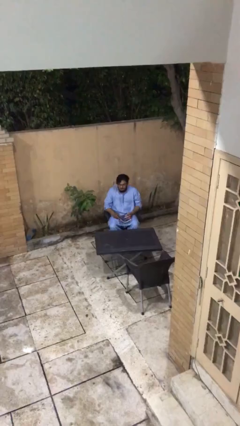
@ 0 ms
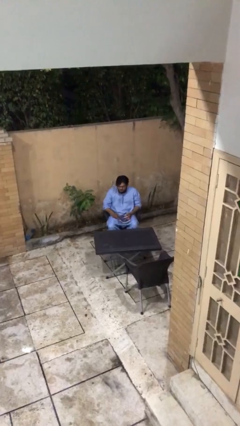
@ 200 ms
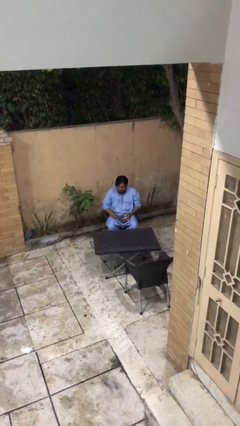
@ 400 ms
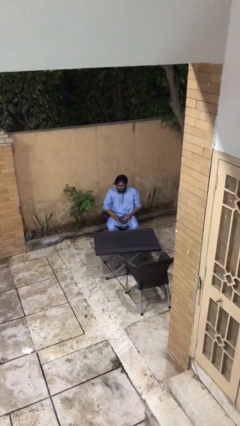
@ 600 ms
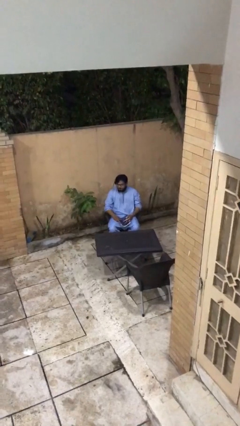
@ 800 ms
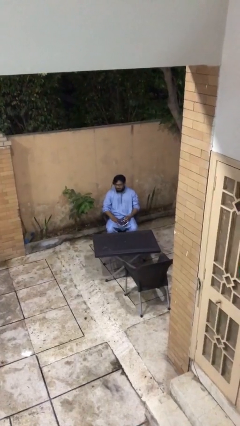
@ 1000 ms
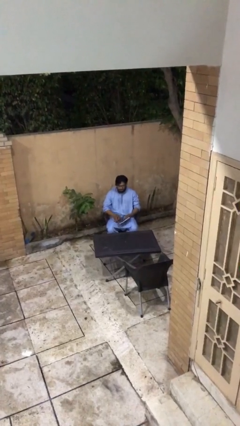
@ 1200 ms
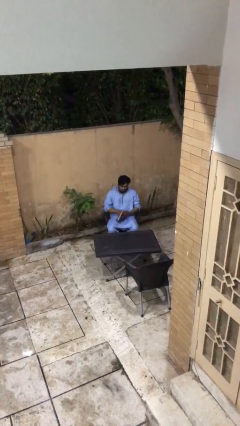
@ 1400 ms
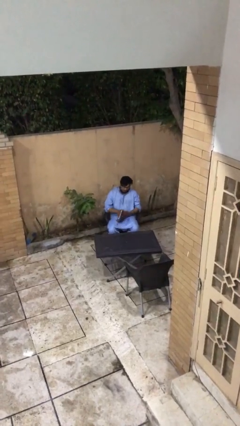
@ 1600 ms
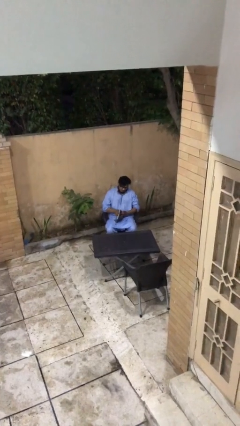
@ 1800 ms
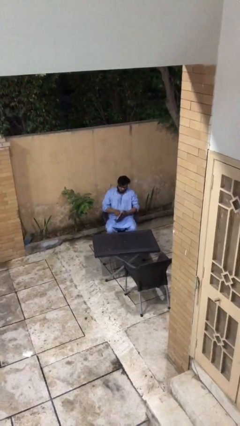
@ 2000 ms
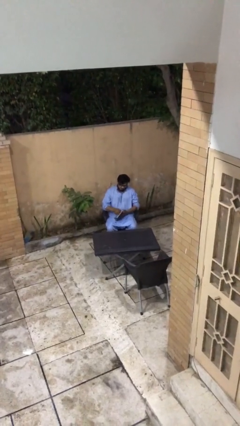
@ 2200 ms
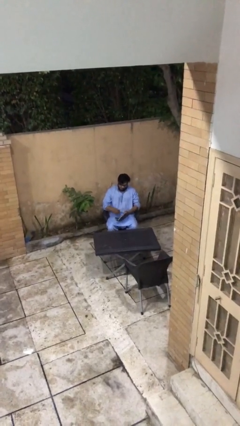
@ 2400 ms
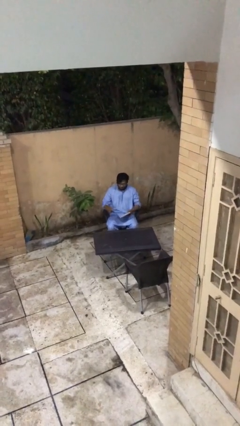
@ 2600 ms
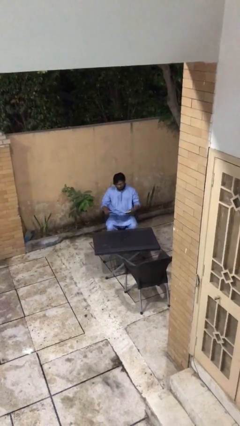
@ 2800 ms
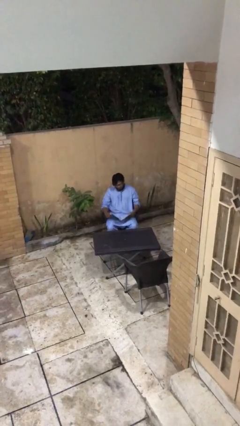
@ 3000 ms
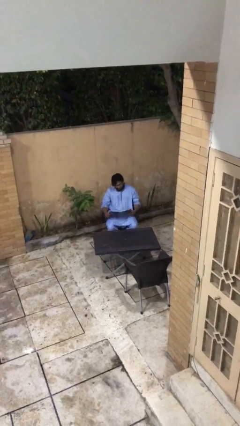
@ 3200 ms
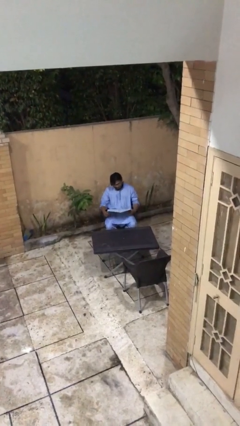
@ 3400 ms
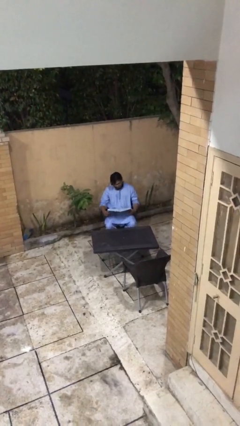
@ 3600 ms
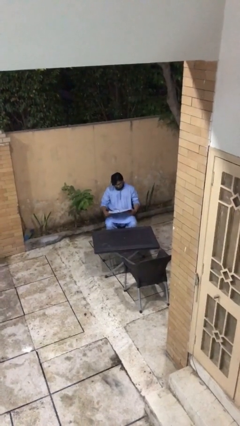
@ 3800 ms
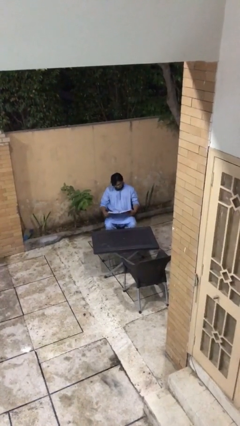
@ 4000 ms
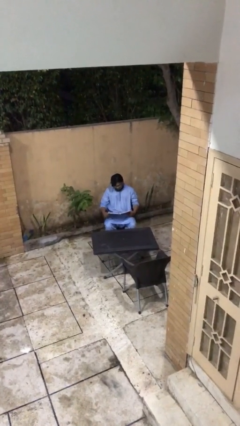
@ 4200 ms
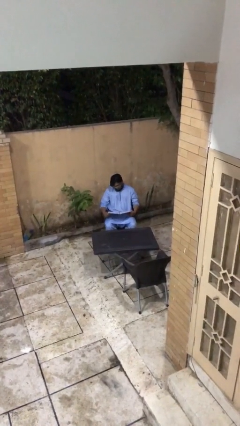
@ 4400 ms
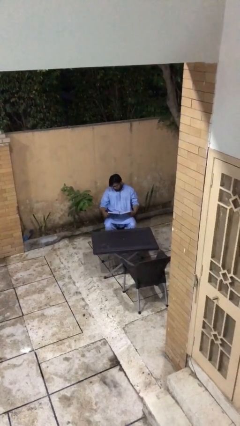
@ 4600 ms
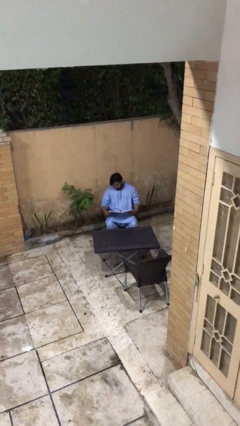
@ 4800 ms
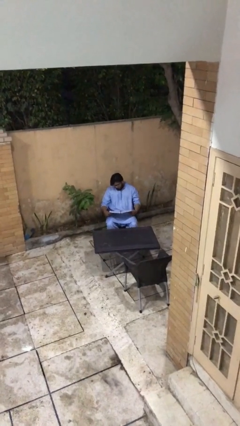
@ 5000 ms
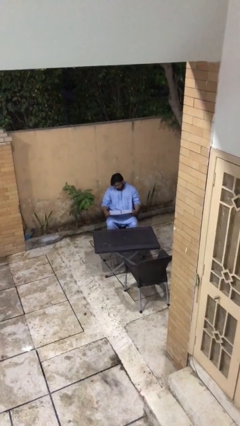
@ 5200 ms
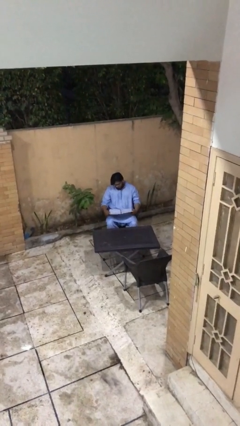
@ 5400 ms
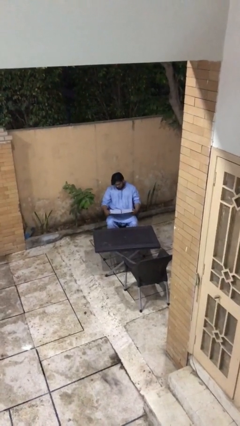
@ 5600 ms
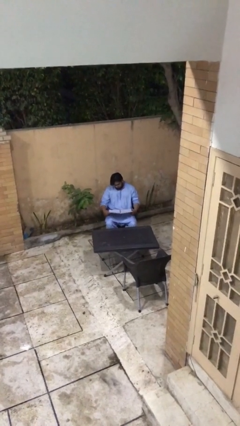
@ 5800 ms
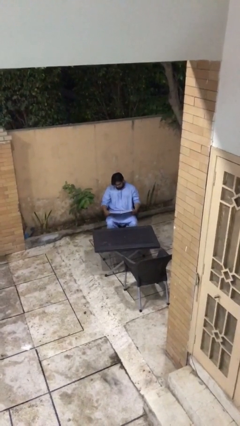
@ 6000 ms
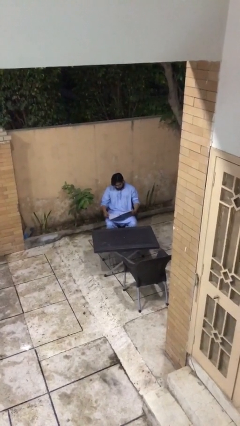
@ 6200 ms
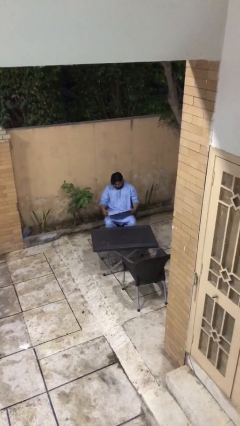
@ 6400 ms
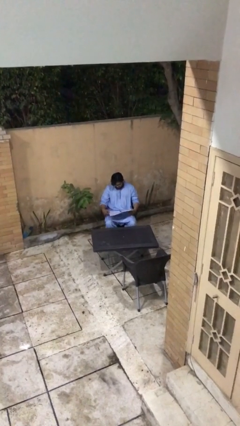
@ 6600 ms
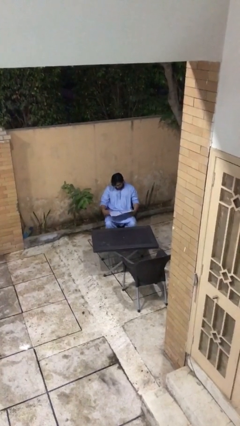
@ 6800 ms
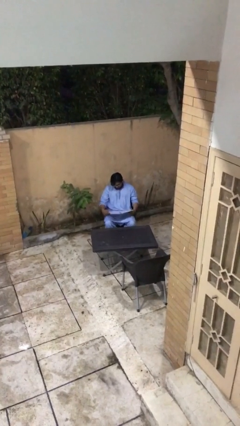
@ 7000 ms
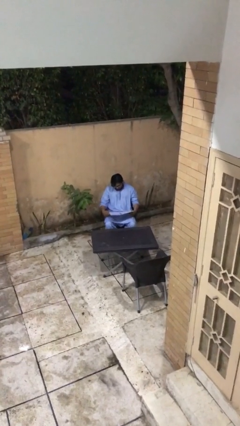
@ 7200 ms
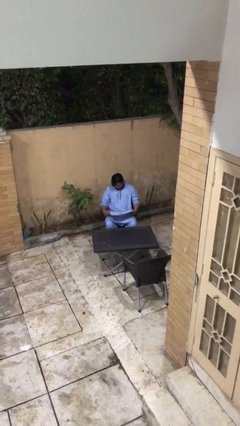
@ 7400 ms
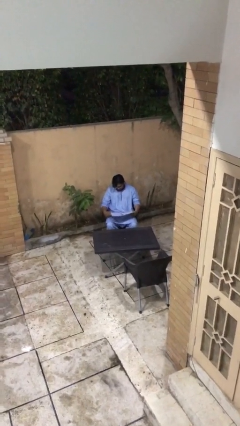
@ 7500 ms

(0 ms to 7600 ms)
person reads document

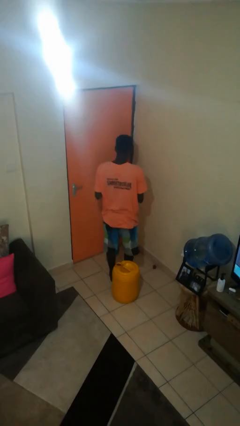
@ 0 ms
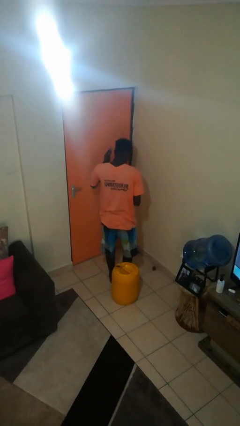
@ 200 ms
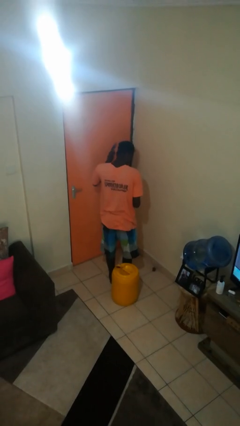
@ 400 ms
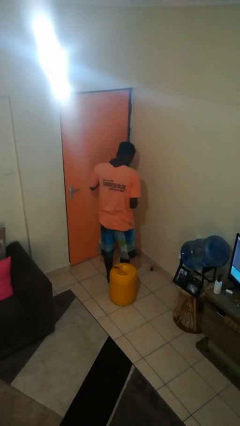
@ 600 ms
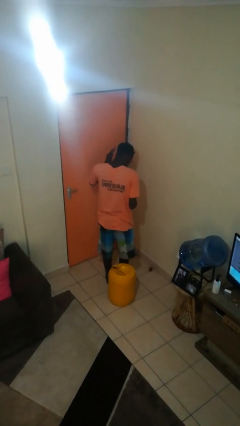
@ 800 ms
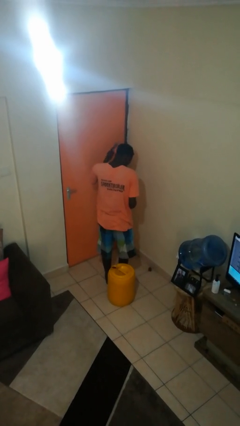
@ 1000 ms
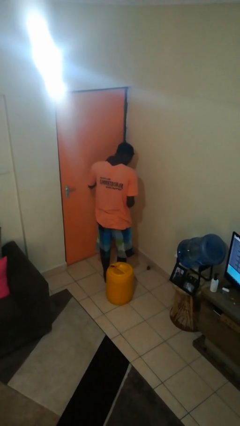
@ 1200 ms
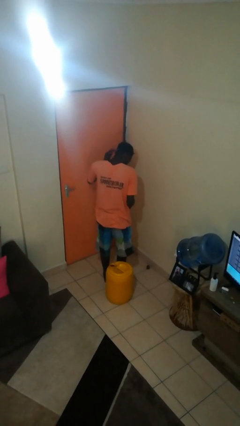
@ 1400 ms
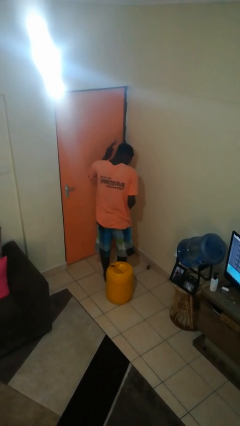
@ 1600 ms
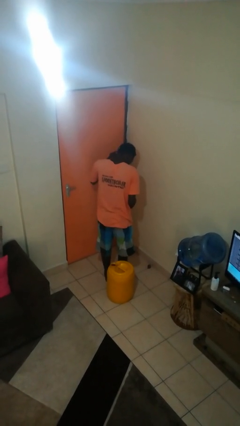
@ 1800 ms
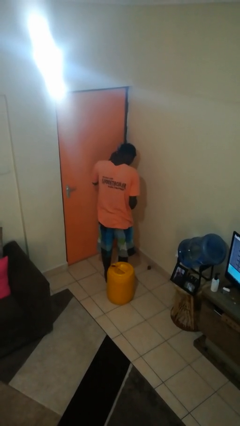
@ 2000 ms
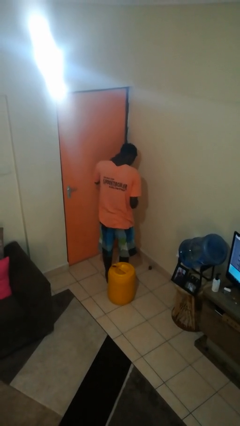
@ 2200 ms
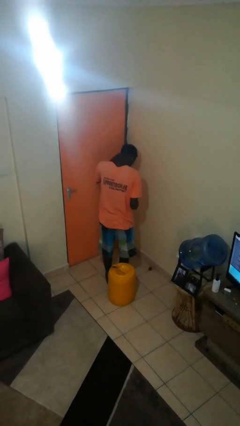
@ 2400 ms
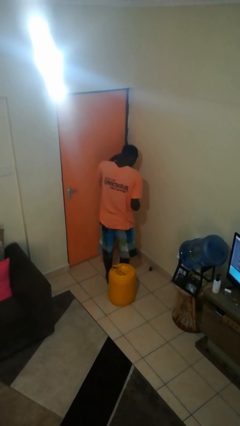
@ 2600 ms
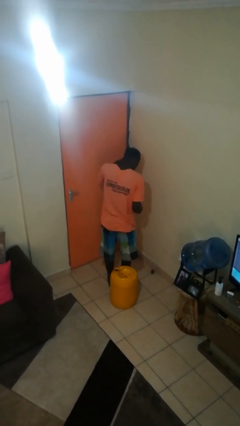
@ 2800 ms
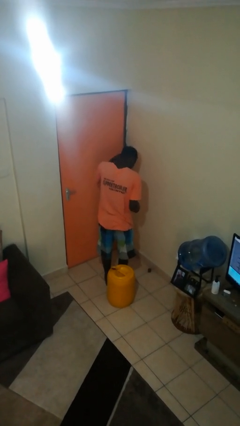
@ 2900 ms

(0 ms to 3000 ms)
person brushes hair

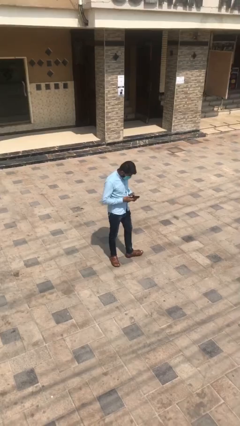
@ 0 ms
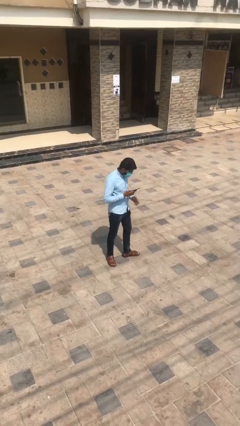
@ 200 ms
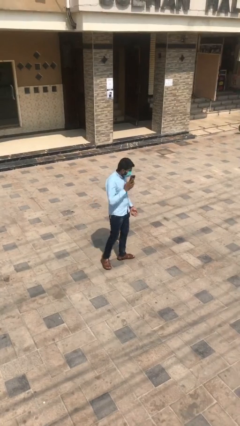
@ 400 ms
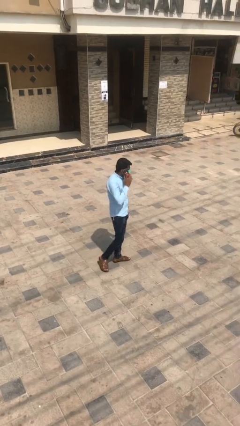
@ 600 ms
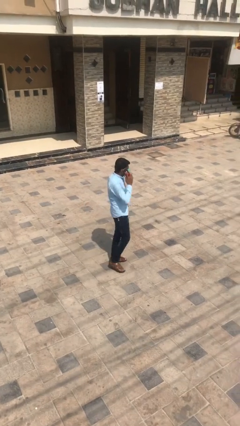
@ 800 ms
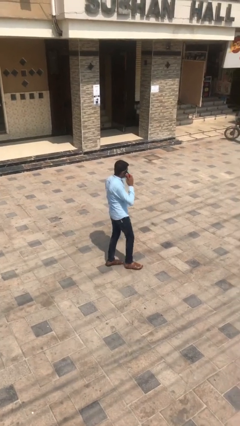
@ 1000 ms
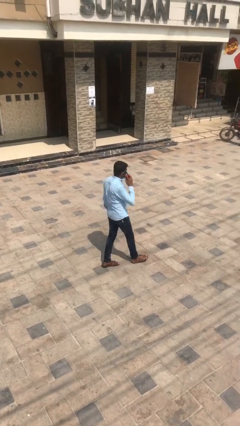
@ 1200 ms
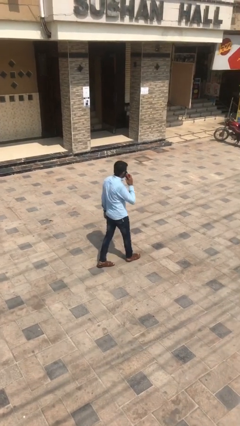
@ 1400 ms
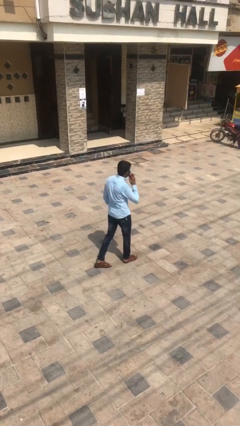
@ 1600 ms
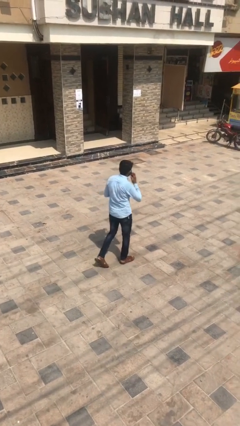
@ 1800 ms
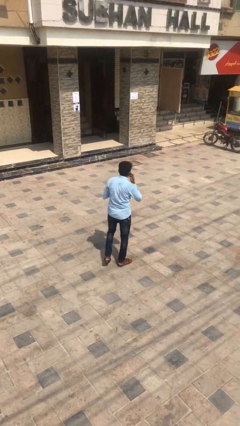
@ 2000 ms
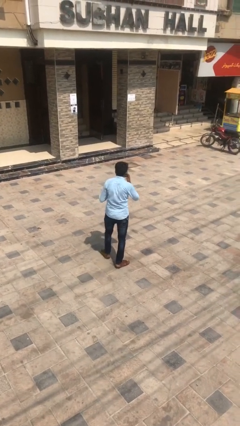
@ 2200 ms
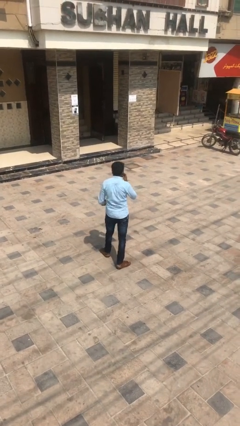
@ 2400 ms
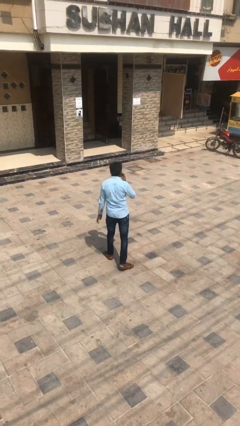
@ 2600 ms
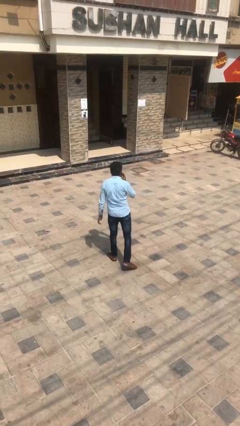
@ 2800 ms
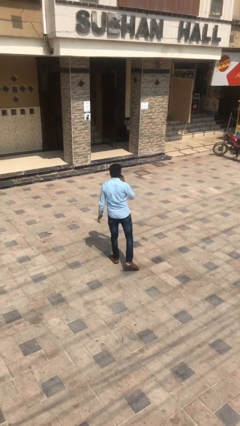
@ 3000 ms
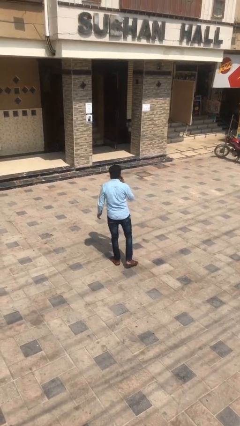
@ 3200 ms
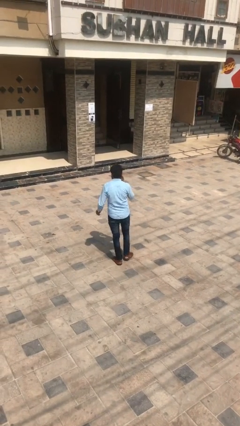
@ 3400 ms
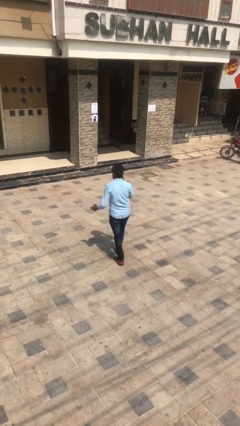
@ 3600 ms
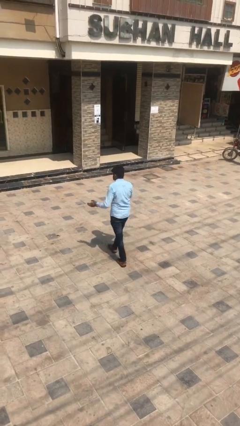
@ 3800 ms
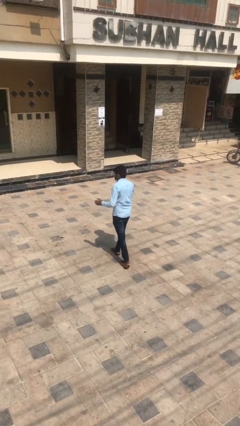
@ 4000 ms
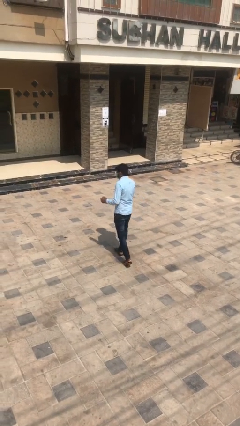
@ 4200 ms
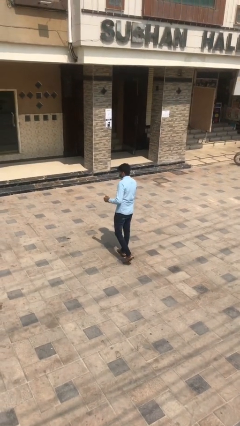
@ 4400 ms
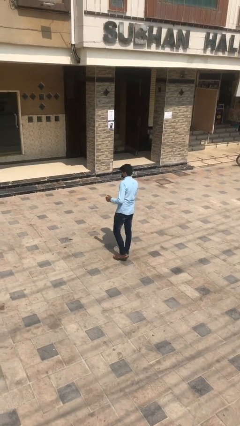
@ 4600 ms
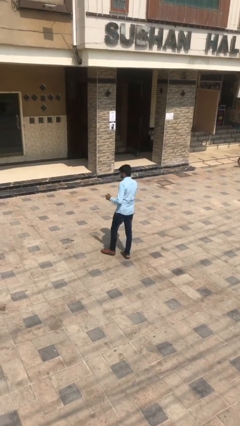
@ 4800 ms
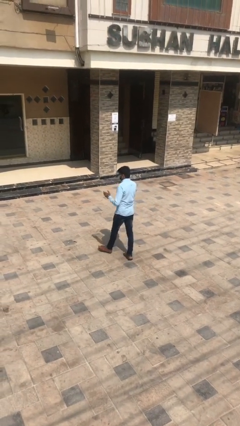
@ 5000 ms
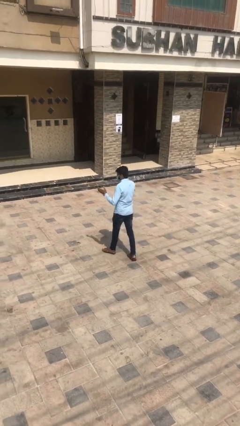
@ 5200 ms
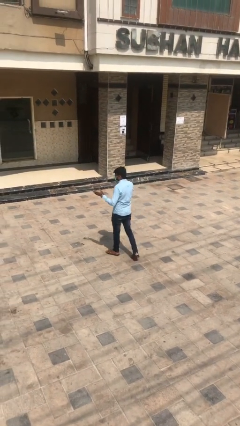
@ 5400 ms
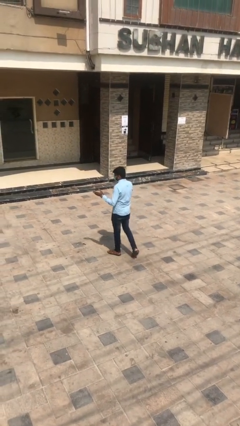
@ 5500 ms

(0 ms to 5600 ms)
person talks on phone

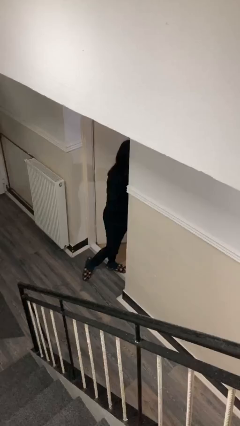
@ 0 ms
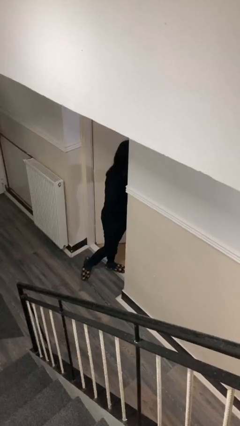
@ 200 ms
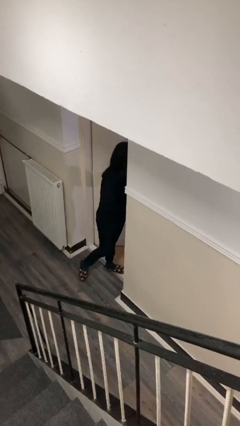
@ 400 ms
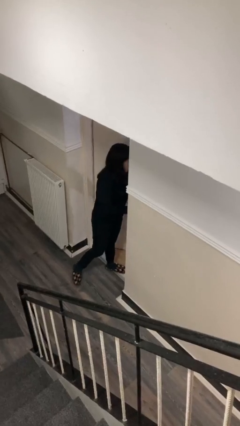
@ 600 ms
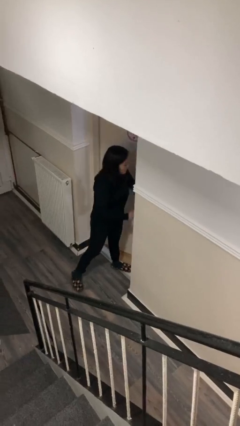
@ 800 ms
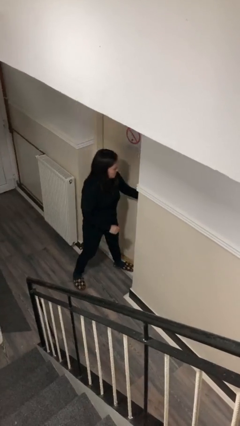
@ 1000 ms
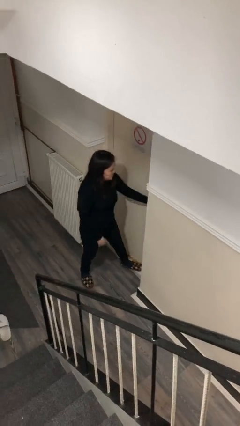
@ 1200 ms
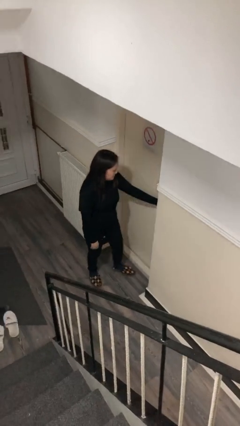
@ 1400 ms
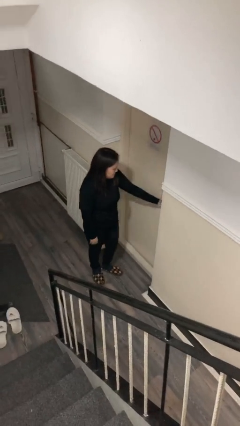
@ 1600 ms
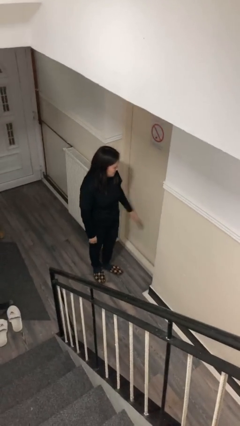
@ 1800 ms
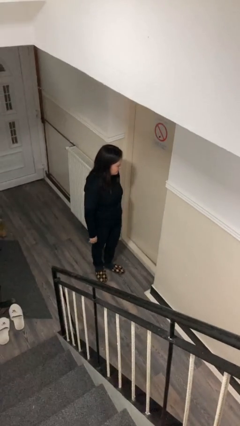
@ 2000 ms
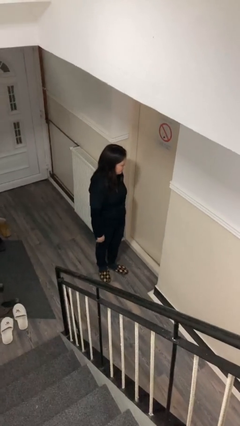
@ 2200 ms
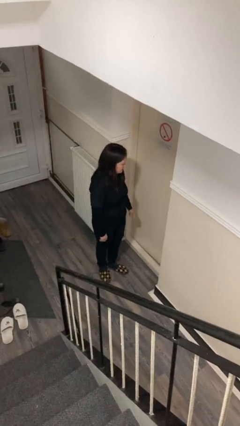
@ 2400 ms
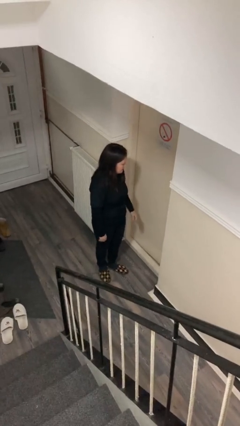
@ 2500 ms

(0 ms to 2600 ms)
person closes facility door
